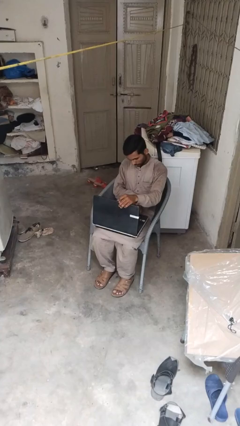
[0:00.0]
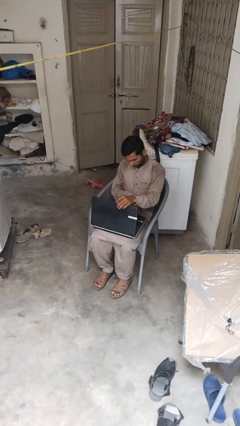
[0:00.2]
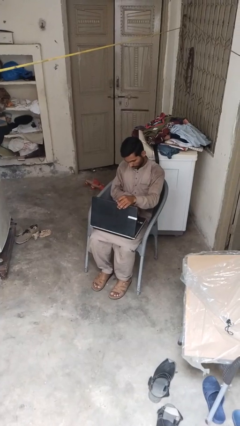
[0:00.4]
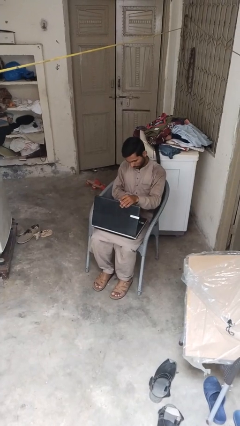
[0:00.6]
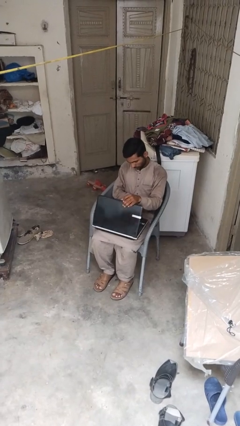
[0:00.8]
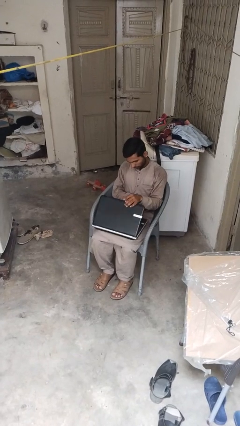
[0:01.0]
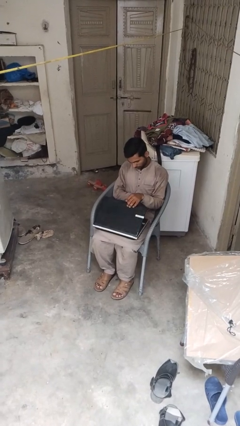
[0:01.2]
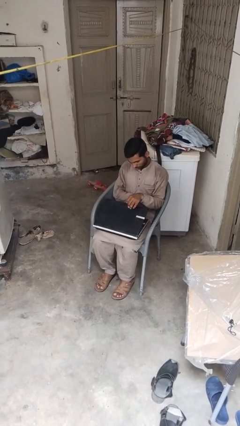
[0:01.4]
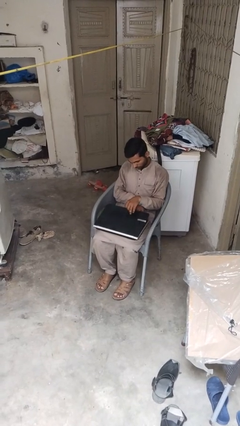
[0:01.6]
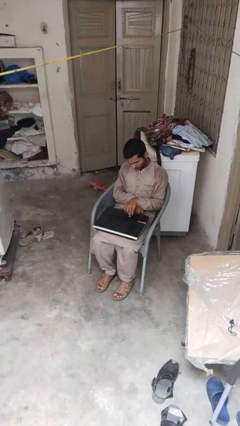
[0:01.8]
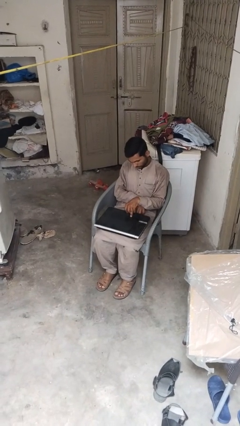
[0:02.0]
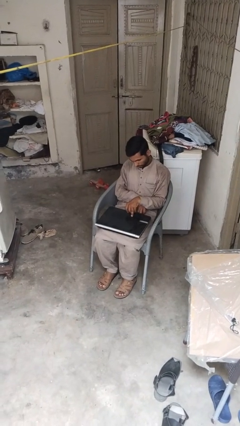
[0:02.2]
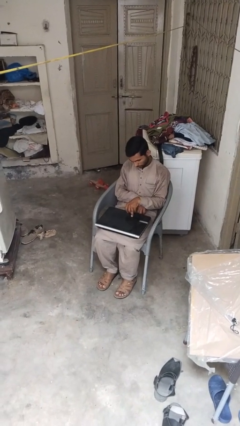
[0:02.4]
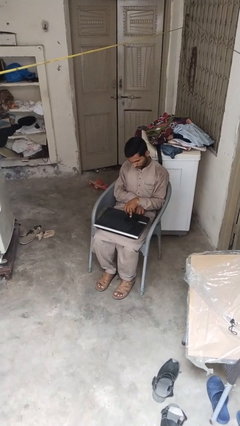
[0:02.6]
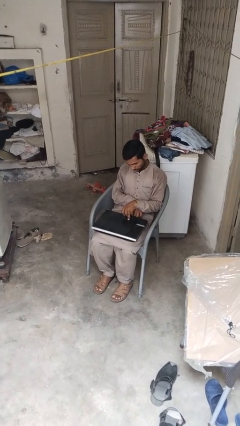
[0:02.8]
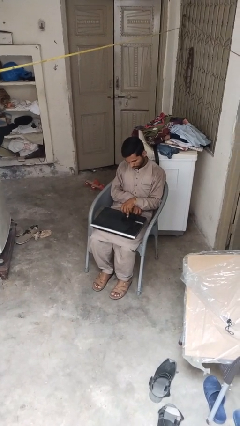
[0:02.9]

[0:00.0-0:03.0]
person closes laptop

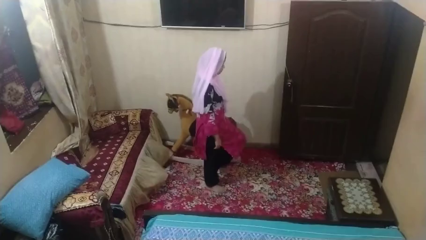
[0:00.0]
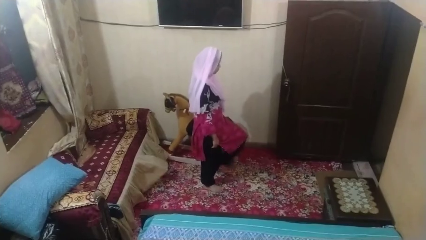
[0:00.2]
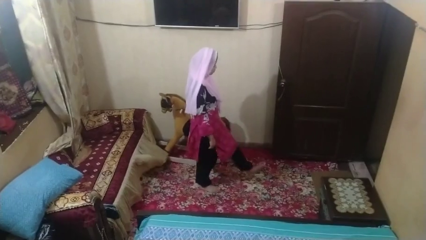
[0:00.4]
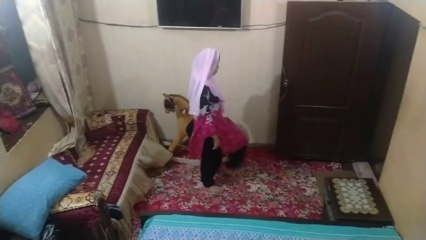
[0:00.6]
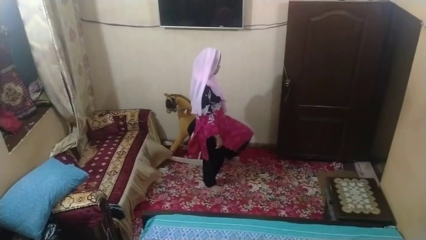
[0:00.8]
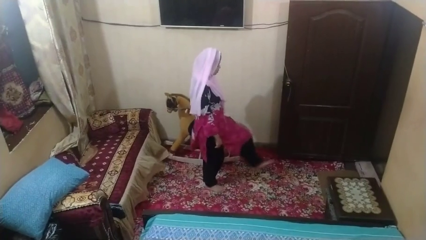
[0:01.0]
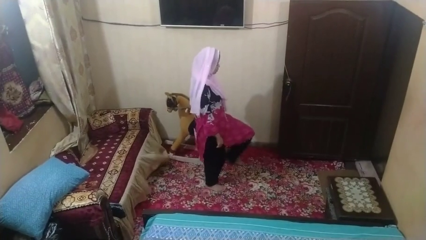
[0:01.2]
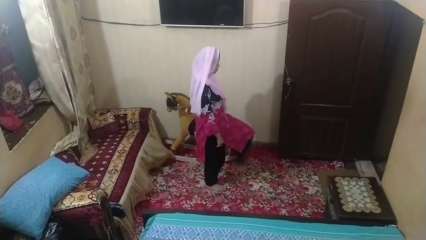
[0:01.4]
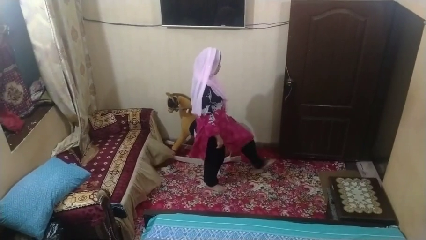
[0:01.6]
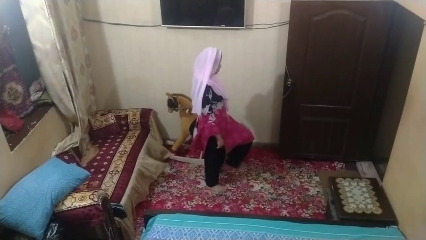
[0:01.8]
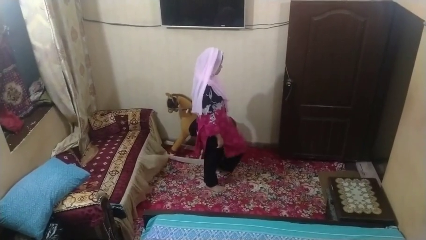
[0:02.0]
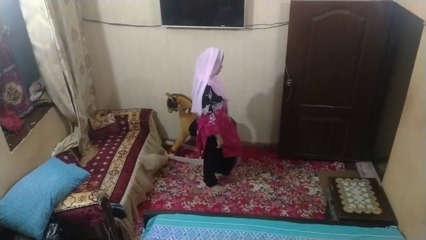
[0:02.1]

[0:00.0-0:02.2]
person karate kicks

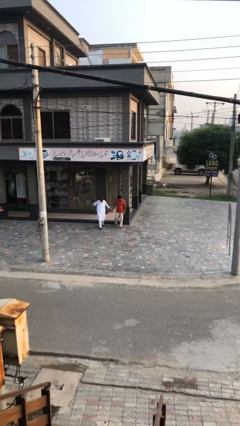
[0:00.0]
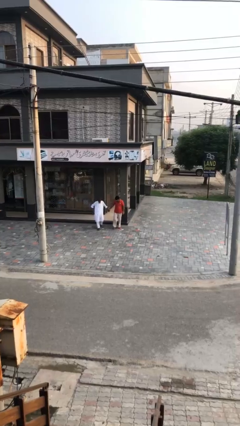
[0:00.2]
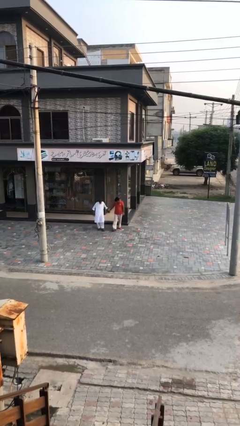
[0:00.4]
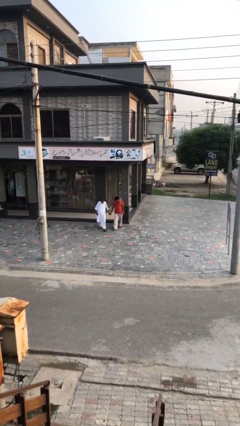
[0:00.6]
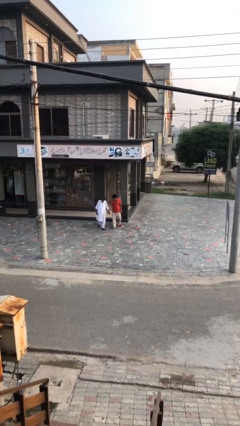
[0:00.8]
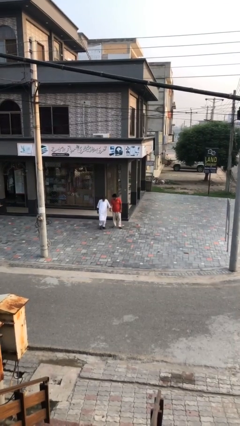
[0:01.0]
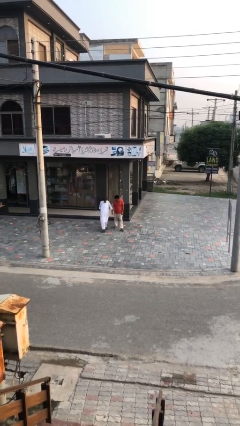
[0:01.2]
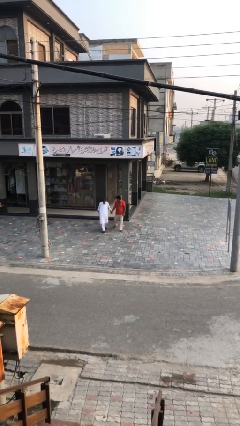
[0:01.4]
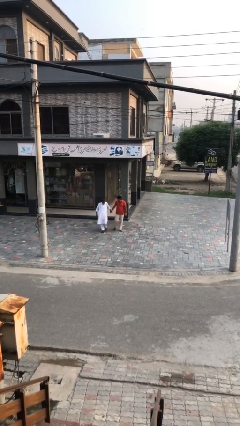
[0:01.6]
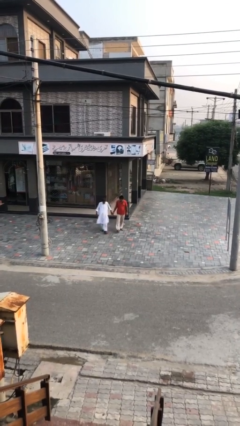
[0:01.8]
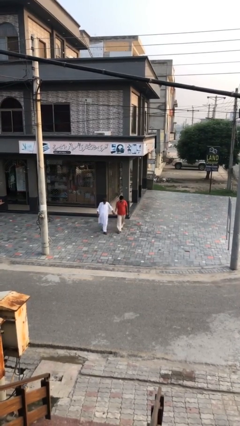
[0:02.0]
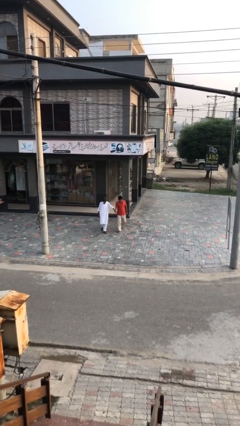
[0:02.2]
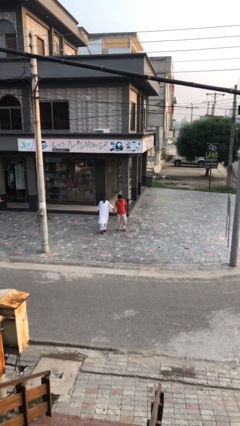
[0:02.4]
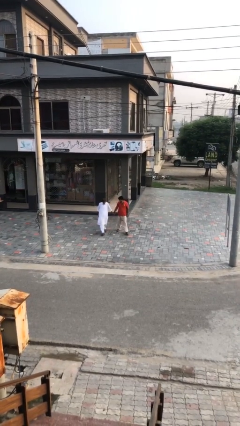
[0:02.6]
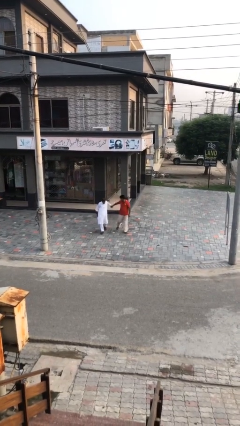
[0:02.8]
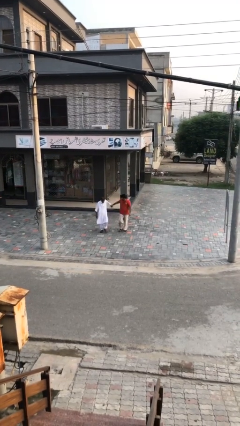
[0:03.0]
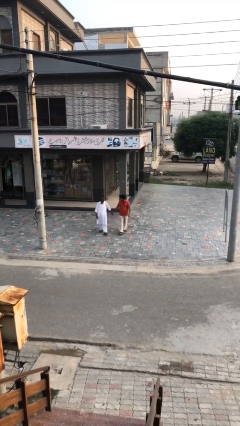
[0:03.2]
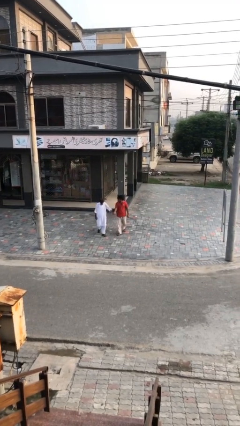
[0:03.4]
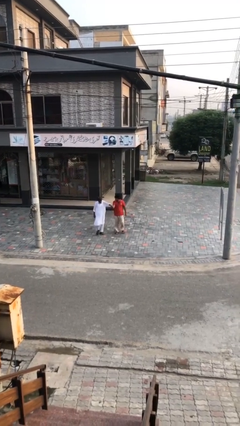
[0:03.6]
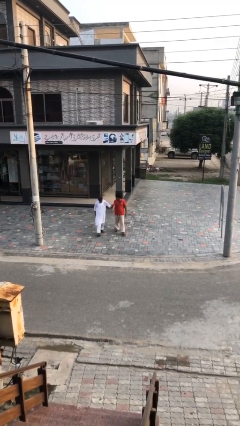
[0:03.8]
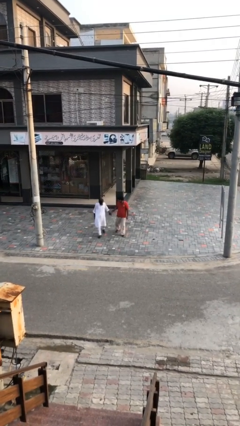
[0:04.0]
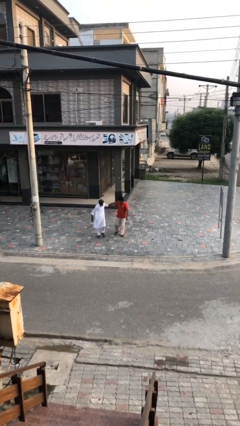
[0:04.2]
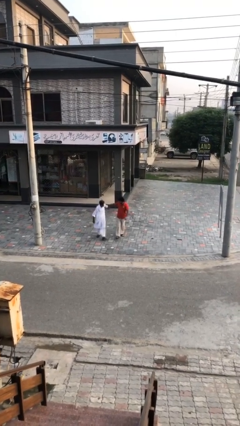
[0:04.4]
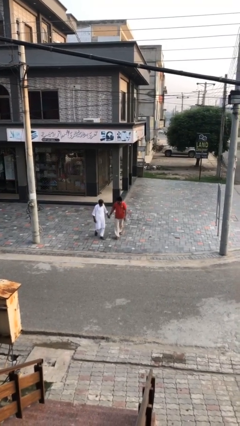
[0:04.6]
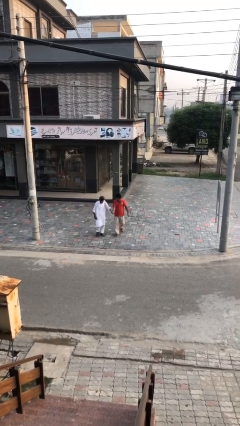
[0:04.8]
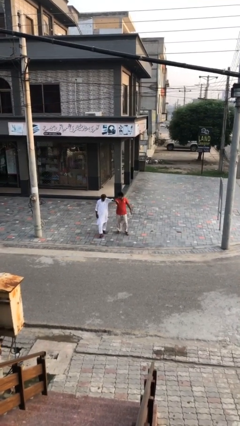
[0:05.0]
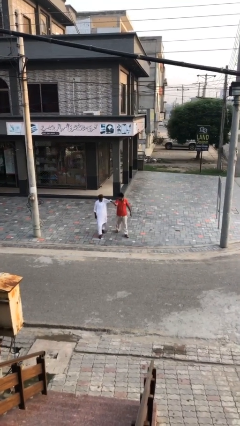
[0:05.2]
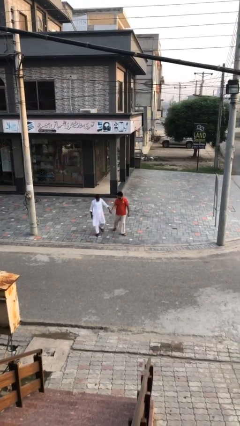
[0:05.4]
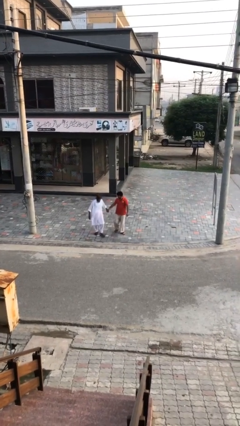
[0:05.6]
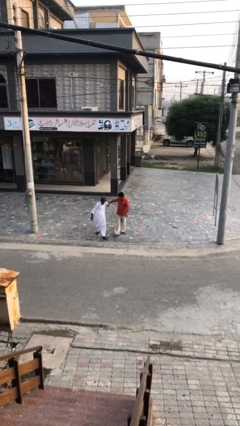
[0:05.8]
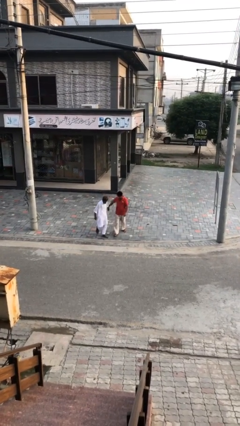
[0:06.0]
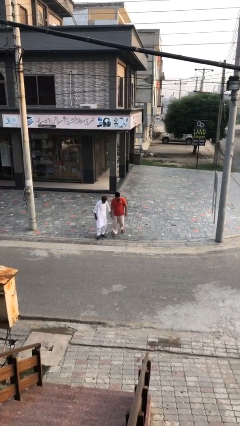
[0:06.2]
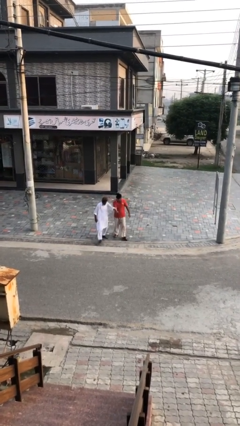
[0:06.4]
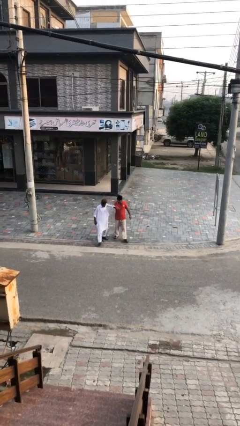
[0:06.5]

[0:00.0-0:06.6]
person holds hand

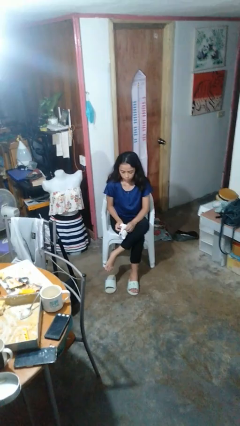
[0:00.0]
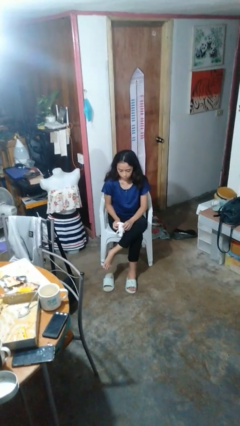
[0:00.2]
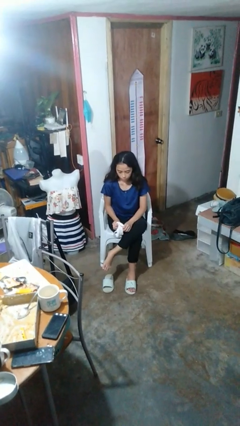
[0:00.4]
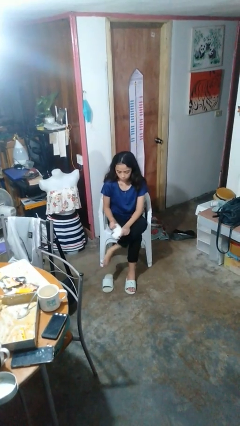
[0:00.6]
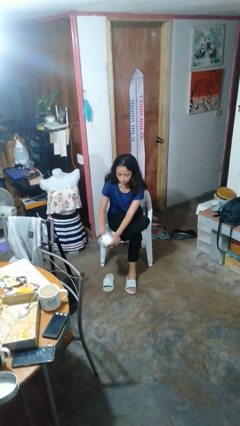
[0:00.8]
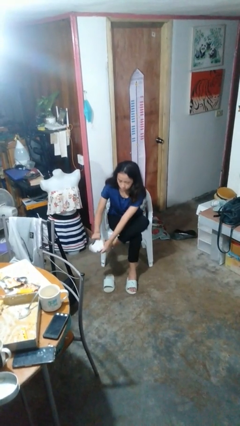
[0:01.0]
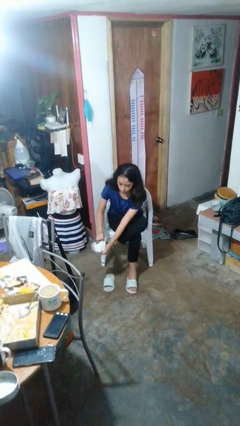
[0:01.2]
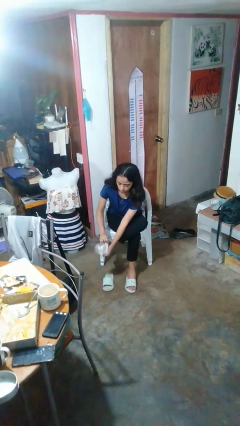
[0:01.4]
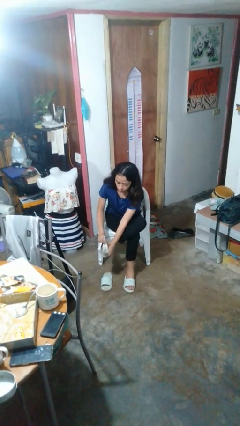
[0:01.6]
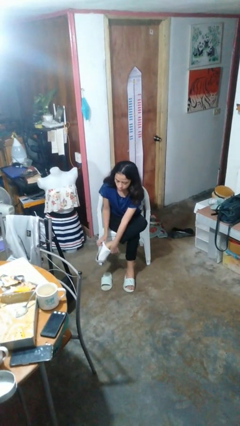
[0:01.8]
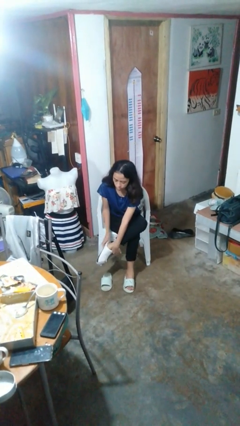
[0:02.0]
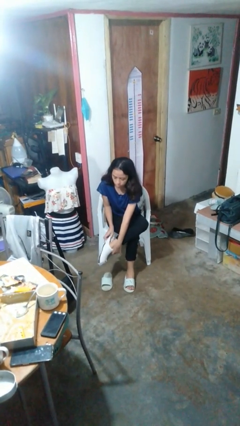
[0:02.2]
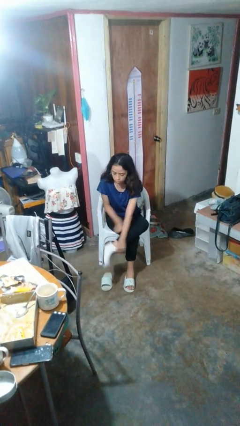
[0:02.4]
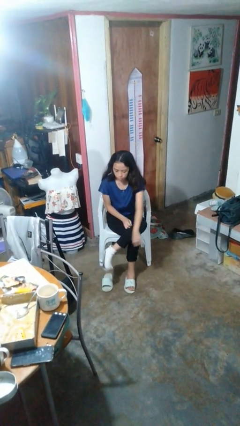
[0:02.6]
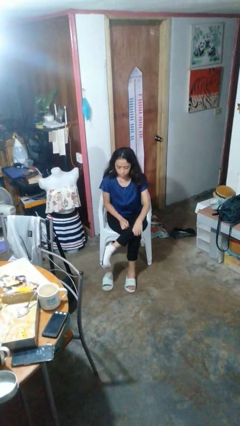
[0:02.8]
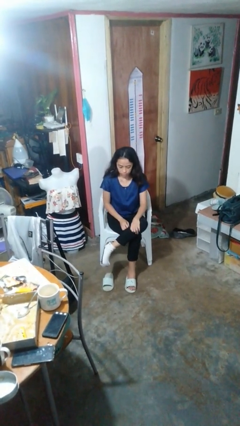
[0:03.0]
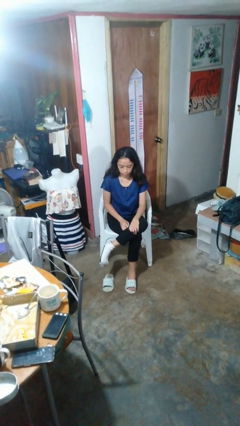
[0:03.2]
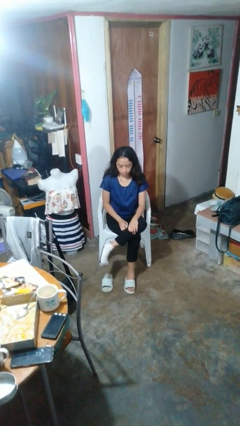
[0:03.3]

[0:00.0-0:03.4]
person puts on socks

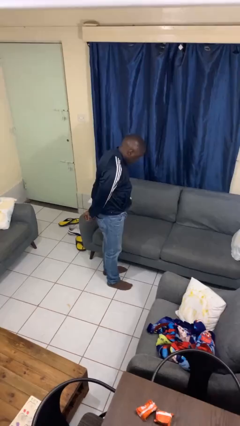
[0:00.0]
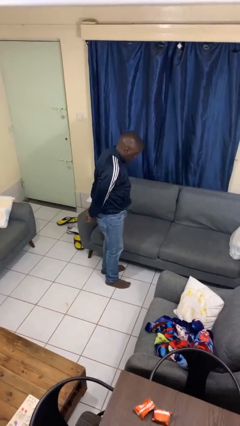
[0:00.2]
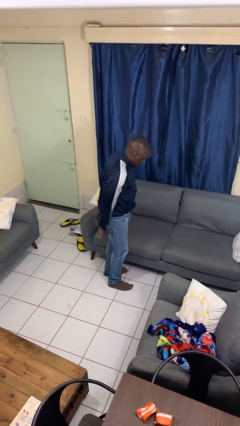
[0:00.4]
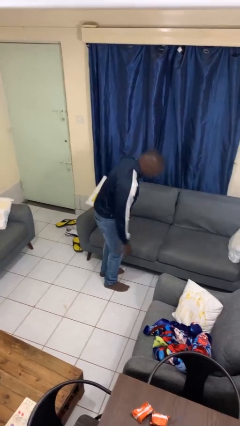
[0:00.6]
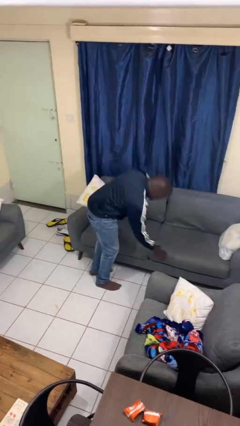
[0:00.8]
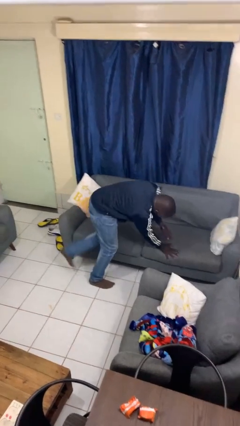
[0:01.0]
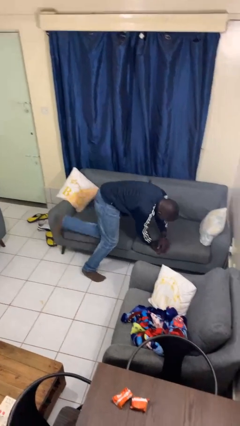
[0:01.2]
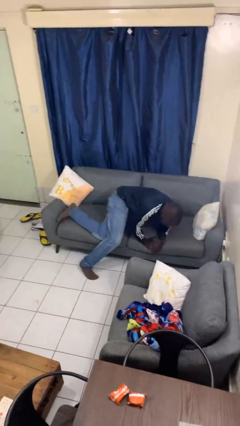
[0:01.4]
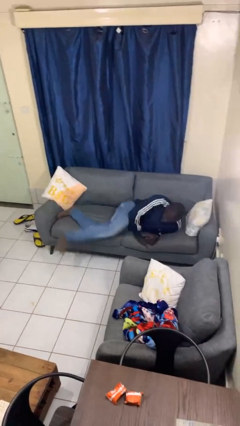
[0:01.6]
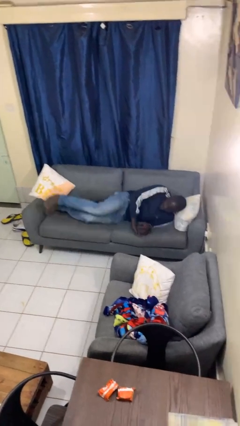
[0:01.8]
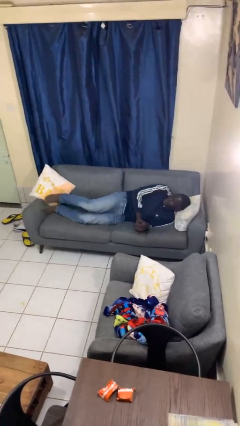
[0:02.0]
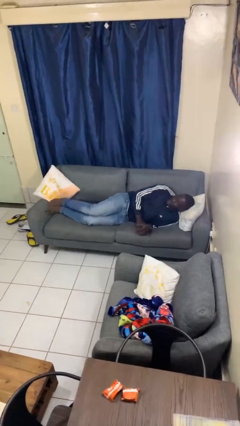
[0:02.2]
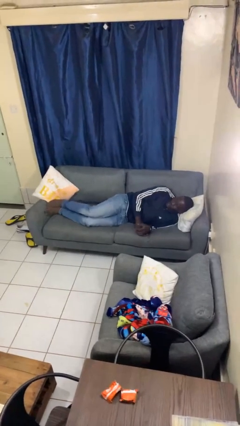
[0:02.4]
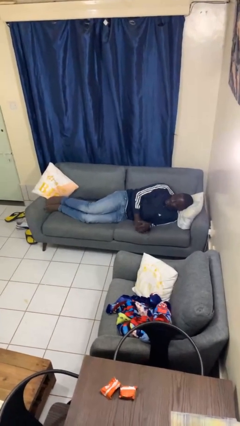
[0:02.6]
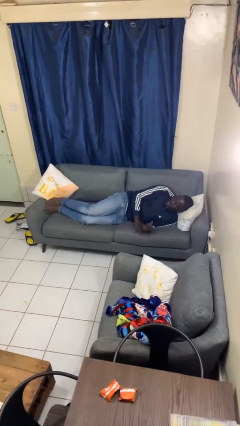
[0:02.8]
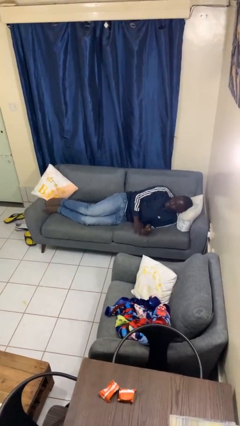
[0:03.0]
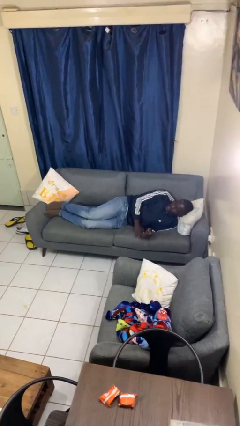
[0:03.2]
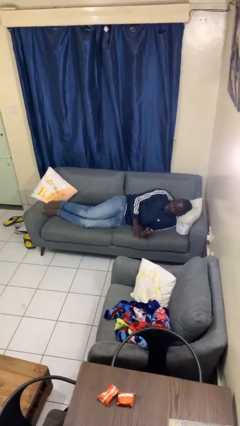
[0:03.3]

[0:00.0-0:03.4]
person lies down on couch
